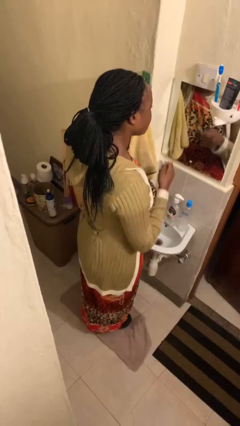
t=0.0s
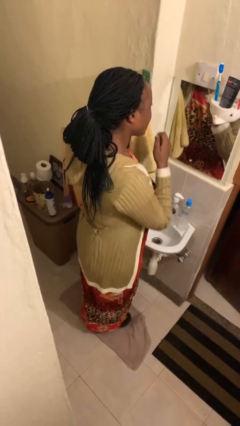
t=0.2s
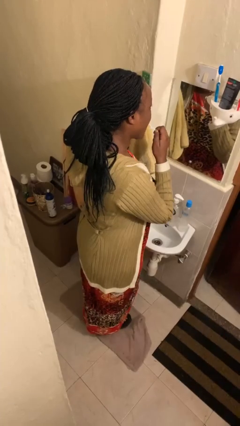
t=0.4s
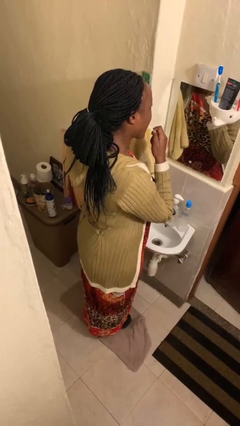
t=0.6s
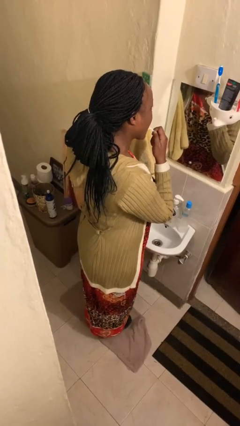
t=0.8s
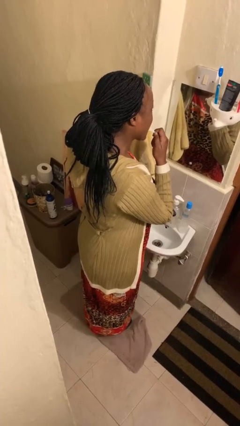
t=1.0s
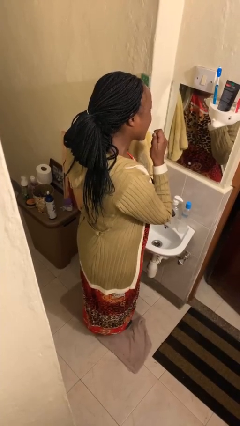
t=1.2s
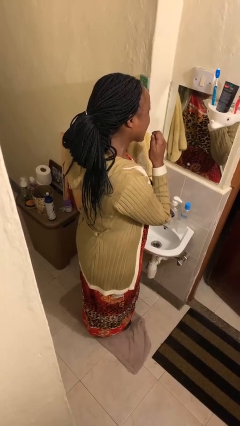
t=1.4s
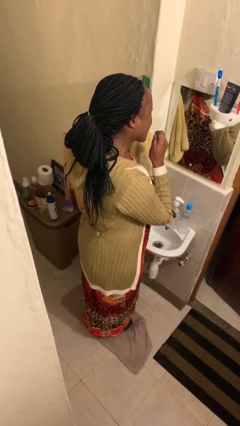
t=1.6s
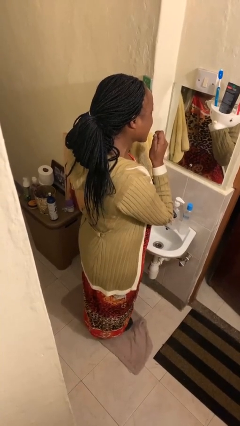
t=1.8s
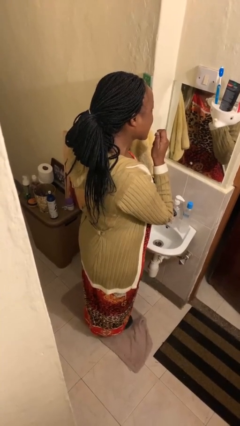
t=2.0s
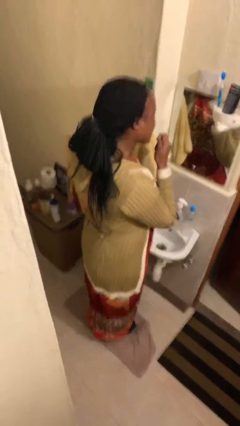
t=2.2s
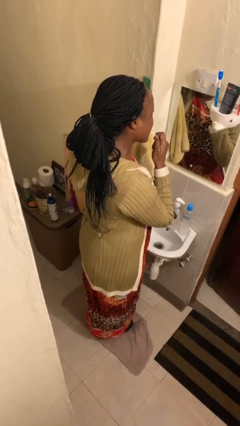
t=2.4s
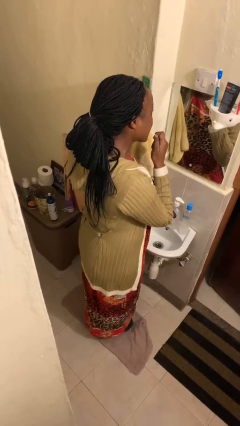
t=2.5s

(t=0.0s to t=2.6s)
person flosses

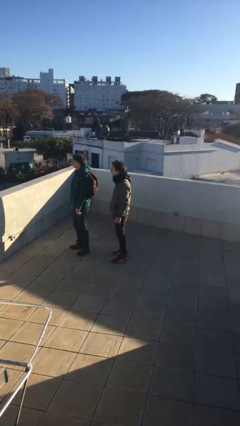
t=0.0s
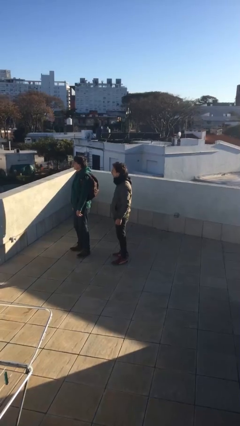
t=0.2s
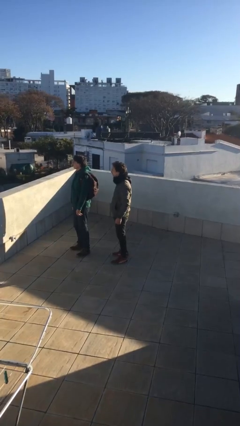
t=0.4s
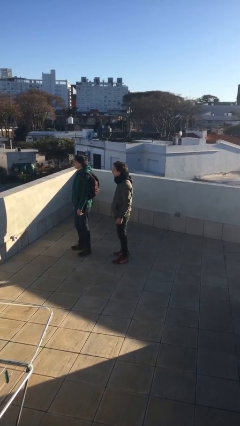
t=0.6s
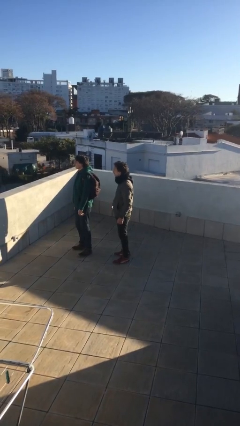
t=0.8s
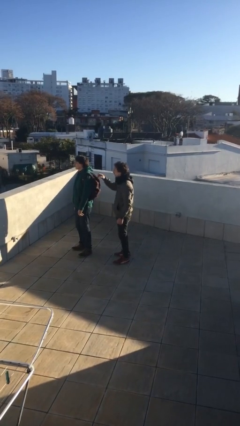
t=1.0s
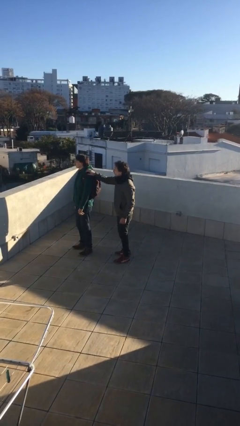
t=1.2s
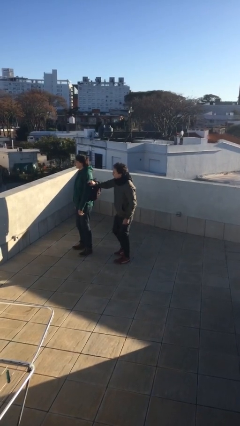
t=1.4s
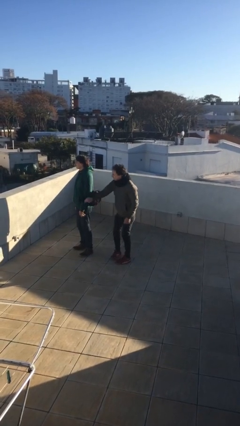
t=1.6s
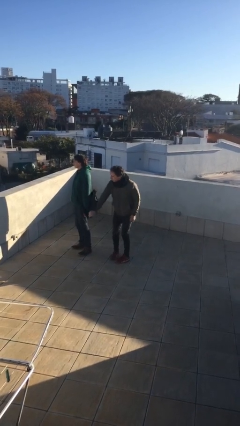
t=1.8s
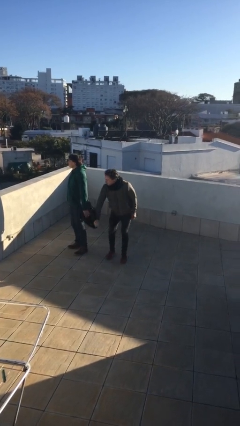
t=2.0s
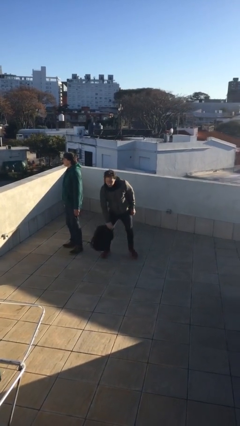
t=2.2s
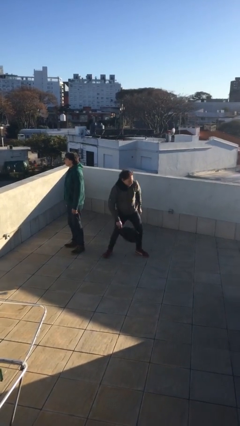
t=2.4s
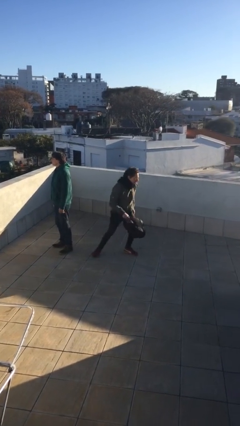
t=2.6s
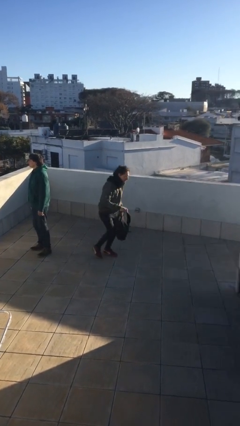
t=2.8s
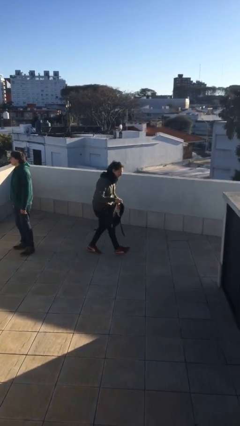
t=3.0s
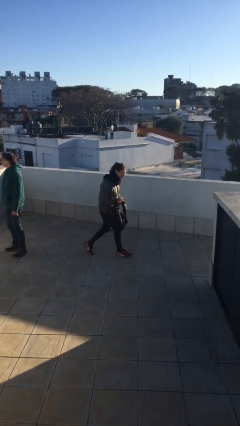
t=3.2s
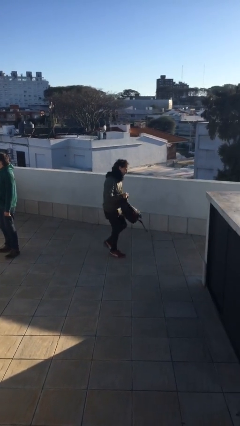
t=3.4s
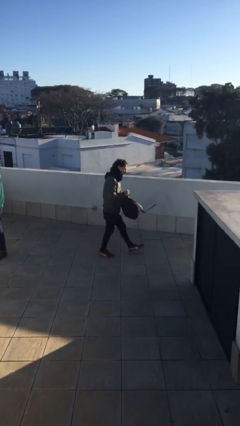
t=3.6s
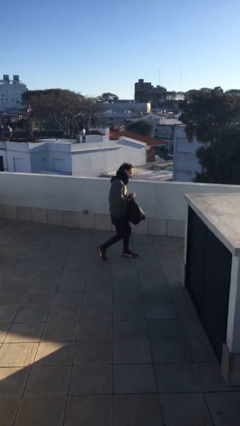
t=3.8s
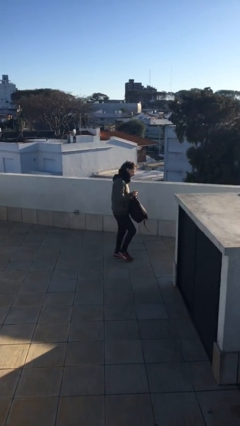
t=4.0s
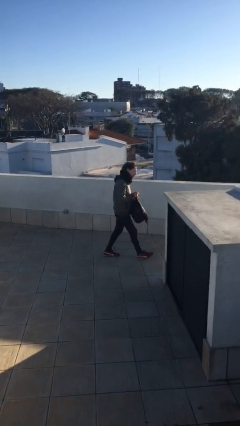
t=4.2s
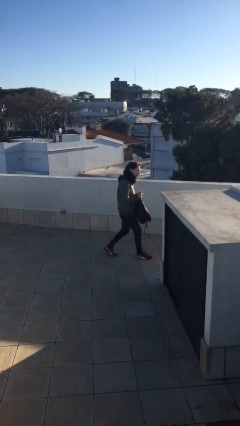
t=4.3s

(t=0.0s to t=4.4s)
person steals object from person

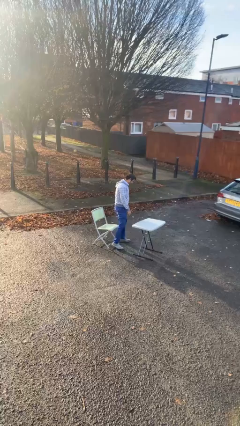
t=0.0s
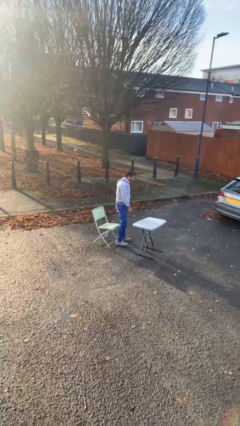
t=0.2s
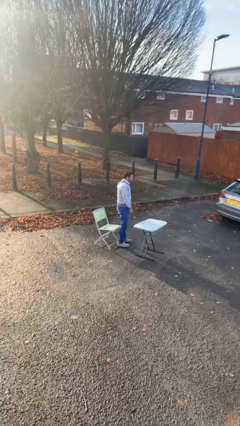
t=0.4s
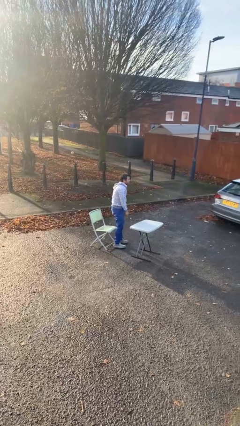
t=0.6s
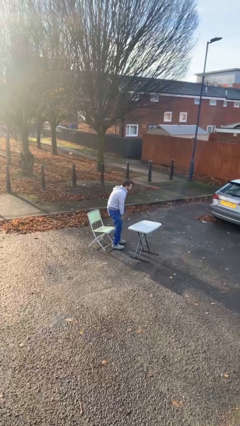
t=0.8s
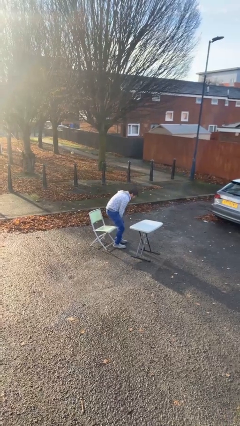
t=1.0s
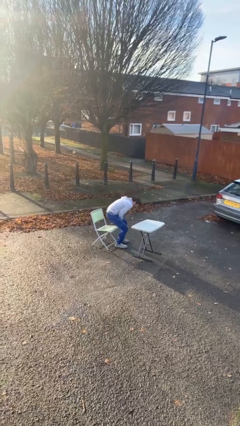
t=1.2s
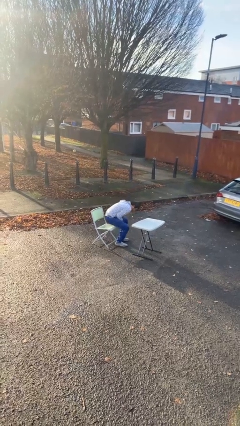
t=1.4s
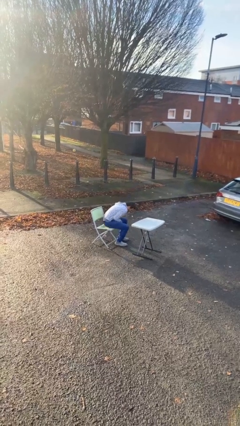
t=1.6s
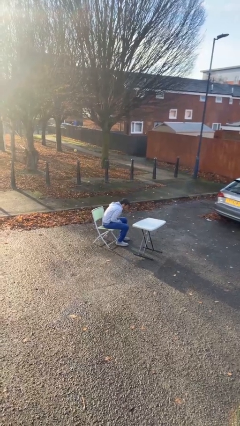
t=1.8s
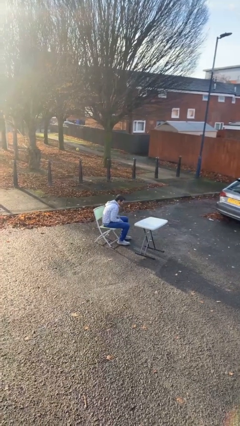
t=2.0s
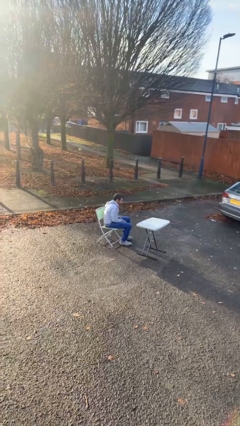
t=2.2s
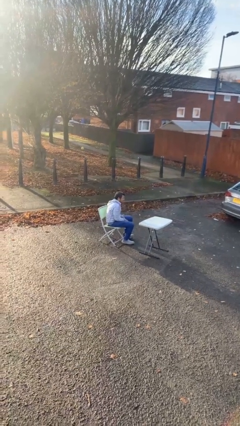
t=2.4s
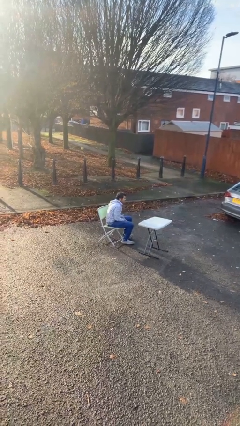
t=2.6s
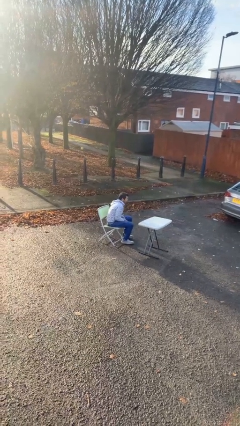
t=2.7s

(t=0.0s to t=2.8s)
person sits down

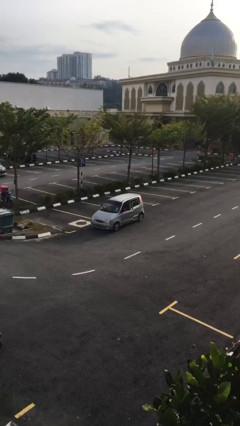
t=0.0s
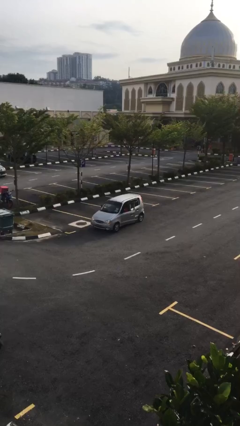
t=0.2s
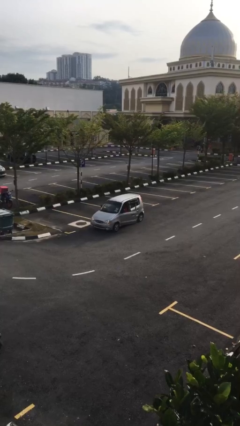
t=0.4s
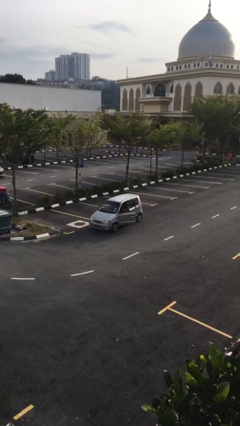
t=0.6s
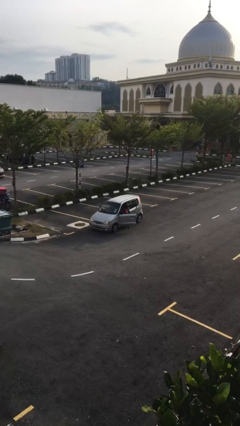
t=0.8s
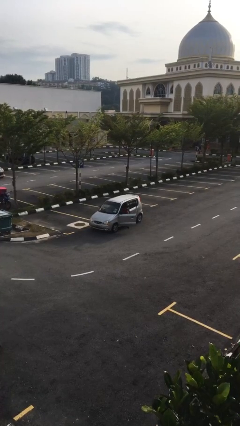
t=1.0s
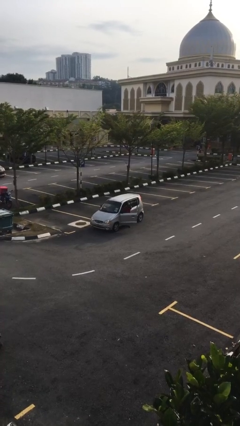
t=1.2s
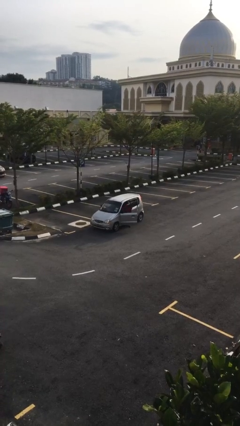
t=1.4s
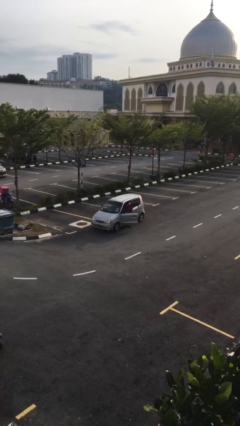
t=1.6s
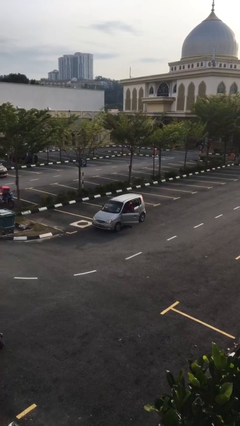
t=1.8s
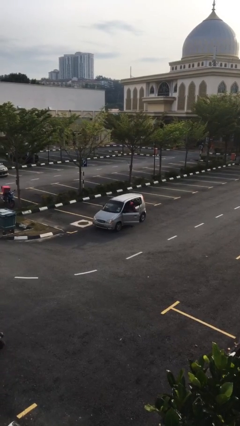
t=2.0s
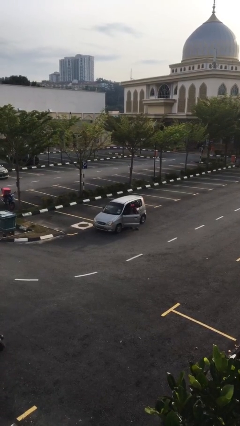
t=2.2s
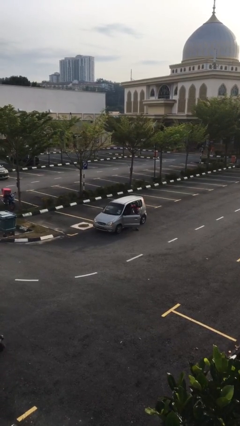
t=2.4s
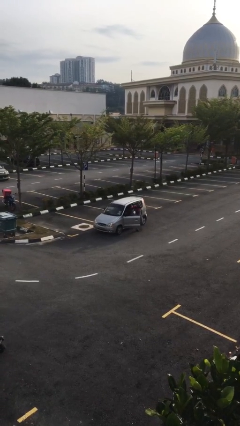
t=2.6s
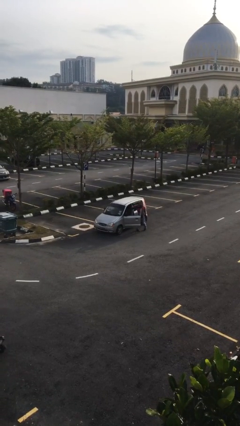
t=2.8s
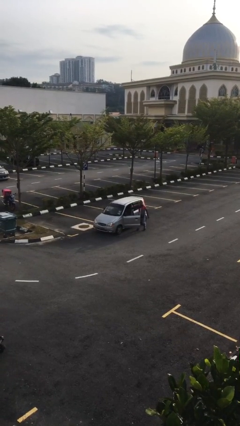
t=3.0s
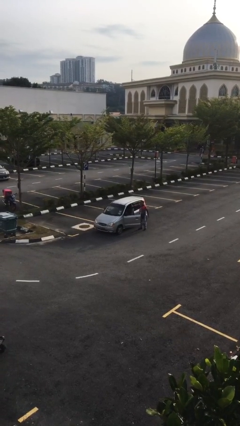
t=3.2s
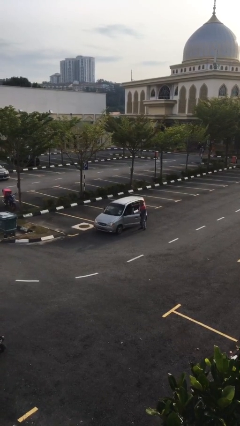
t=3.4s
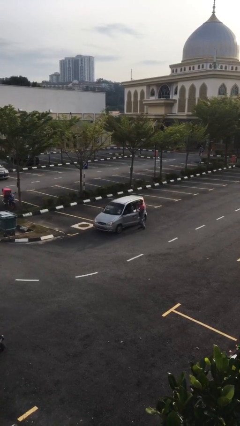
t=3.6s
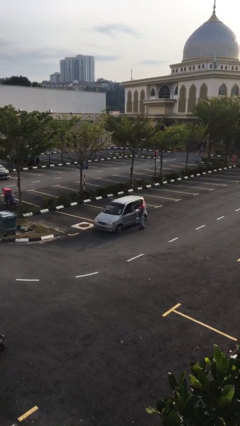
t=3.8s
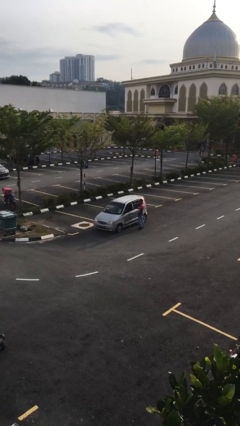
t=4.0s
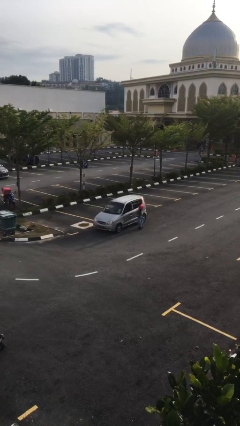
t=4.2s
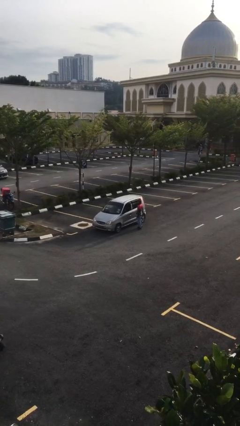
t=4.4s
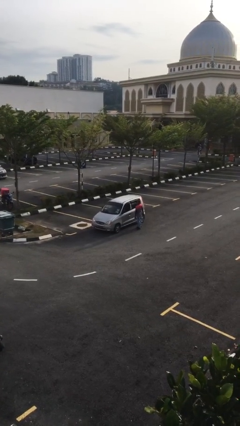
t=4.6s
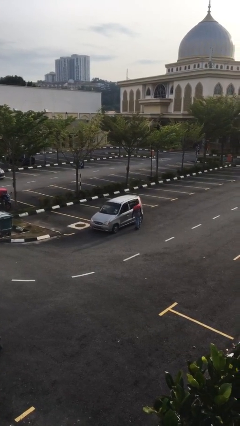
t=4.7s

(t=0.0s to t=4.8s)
car drops off person

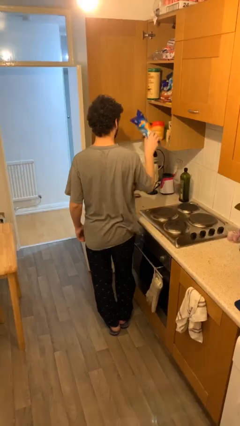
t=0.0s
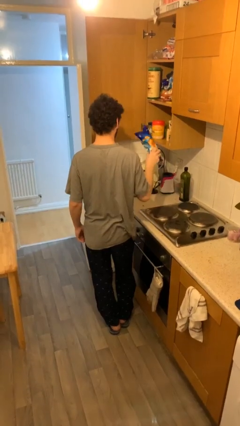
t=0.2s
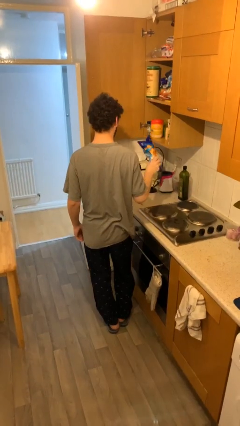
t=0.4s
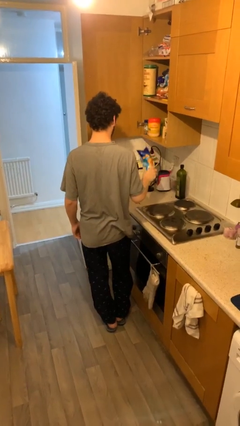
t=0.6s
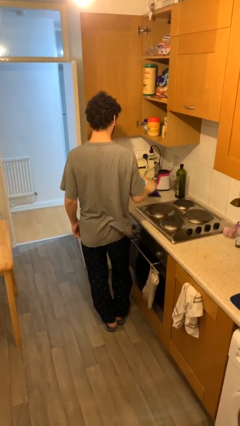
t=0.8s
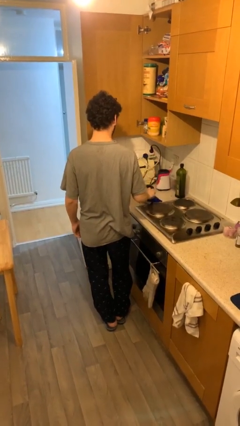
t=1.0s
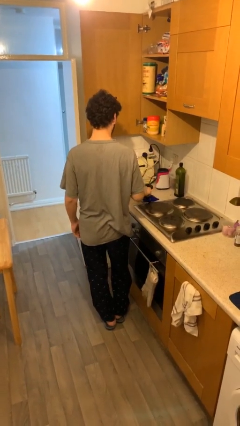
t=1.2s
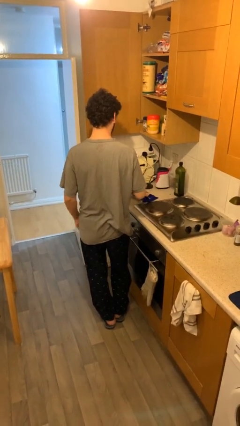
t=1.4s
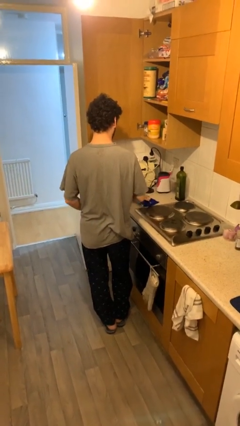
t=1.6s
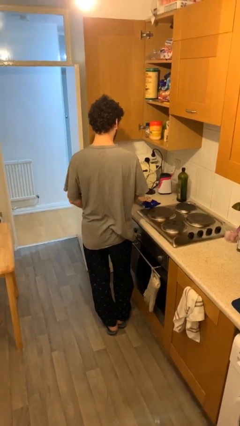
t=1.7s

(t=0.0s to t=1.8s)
person puts down object on table

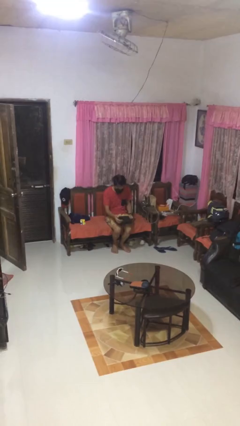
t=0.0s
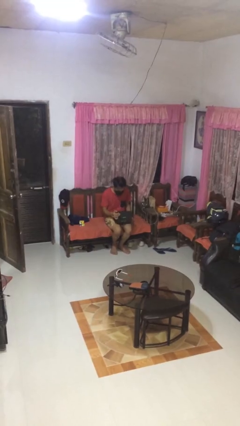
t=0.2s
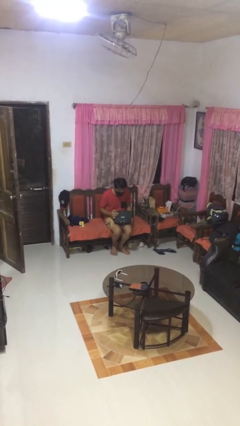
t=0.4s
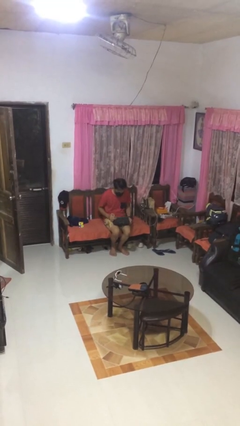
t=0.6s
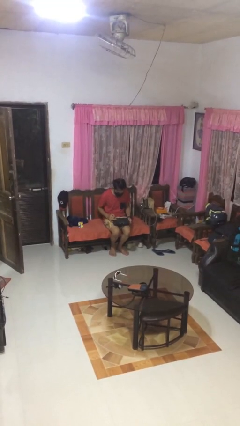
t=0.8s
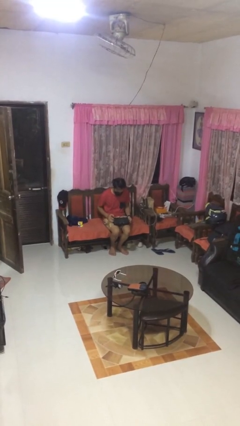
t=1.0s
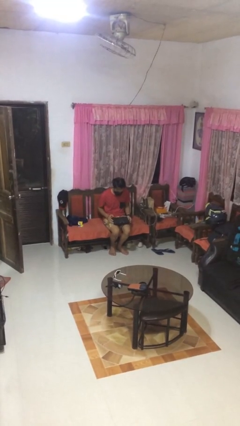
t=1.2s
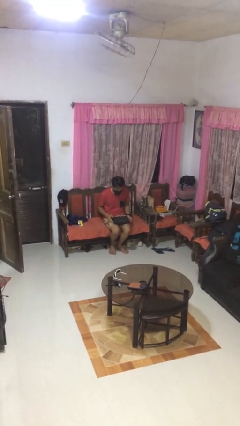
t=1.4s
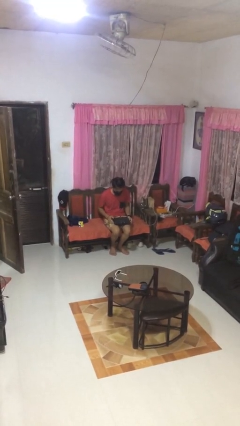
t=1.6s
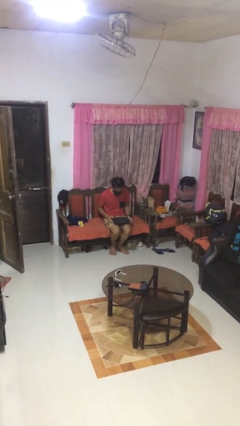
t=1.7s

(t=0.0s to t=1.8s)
person closes laptop
